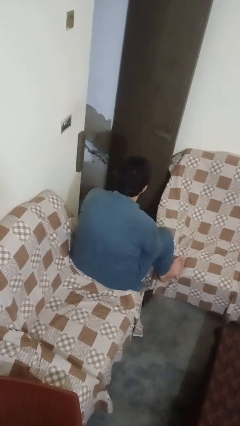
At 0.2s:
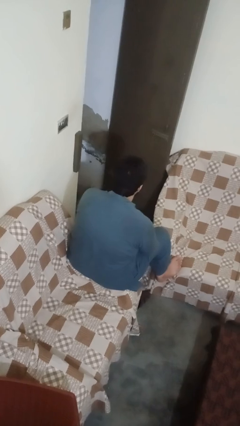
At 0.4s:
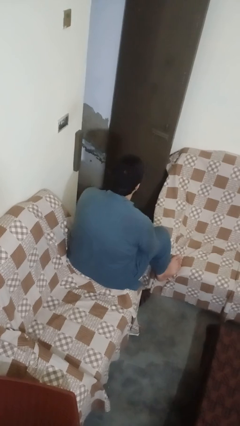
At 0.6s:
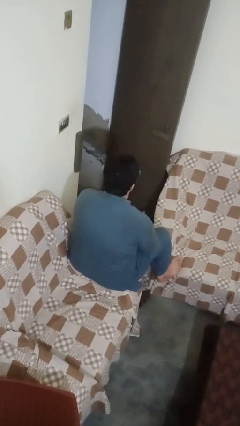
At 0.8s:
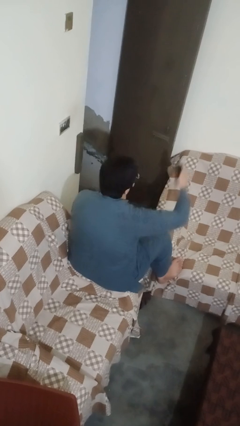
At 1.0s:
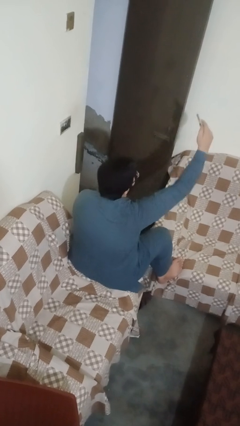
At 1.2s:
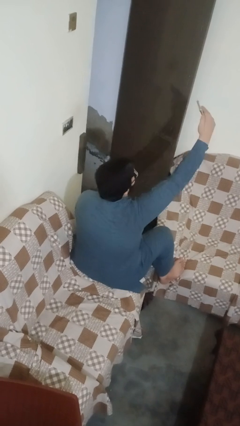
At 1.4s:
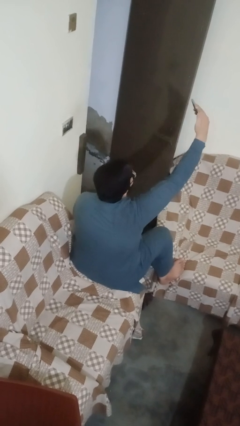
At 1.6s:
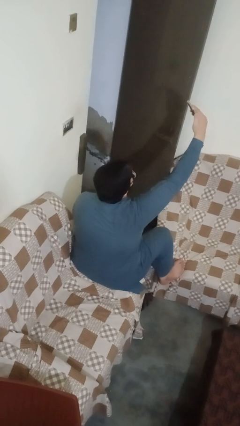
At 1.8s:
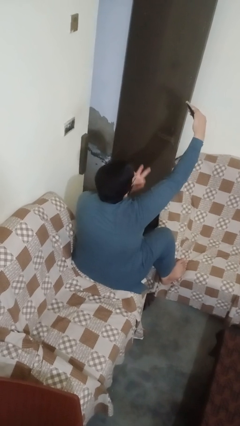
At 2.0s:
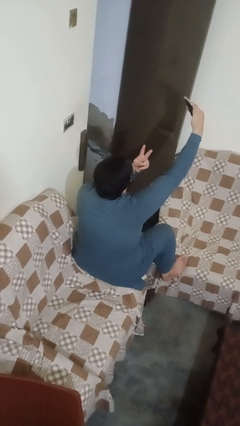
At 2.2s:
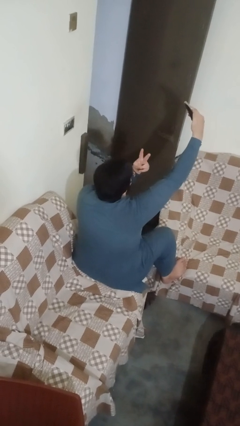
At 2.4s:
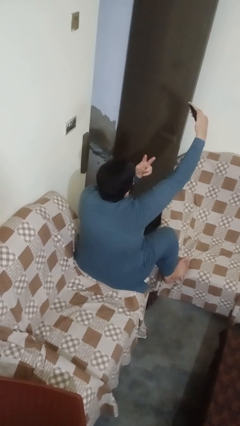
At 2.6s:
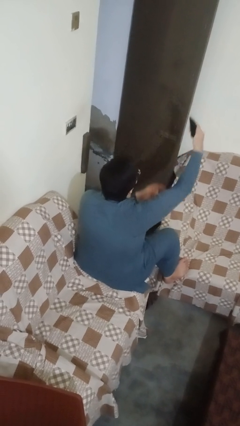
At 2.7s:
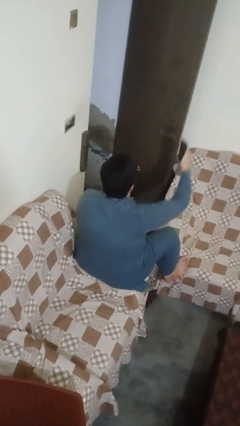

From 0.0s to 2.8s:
person takes selfie

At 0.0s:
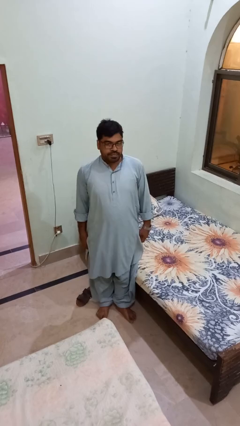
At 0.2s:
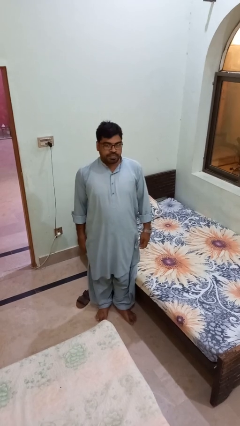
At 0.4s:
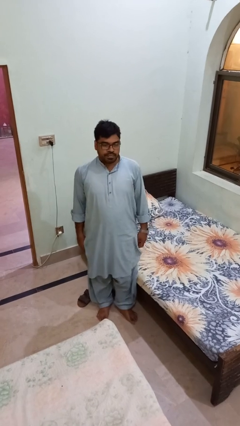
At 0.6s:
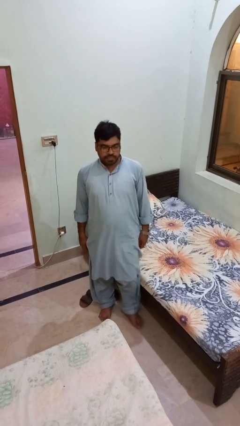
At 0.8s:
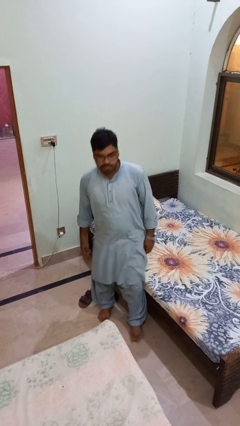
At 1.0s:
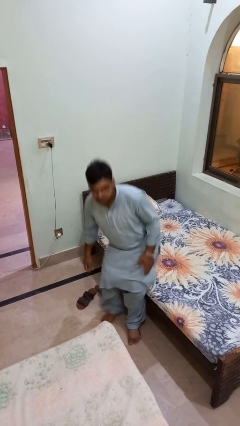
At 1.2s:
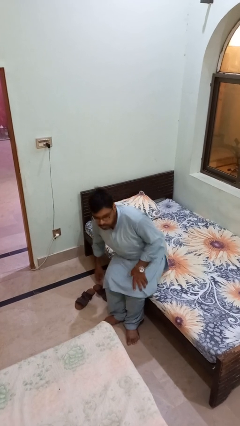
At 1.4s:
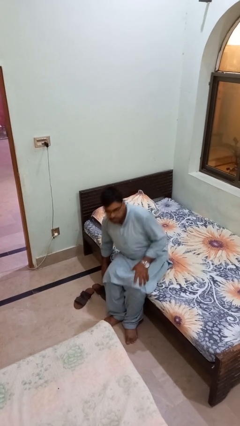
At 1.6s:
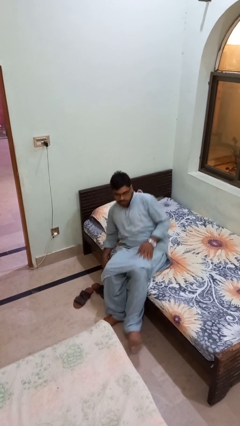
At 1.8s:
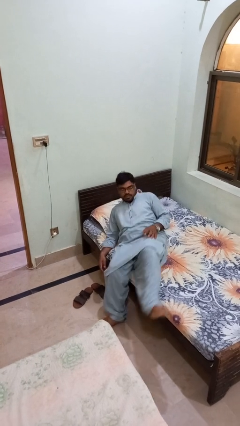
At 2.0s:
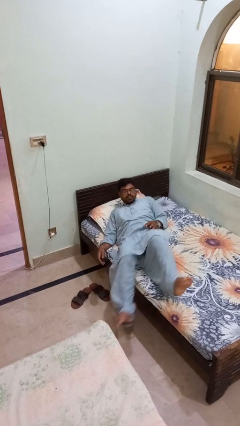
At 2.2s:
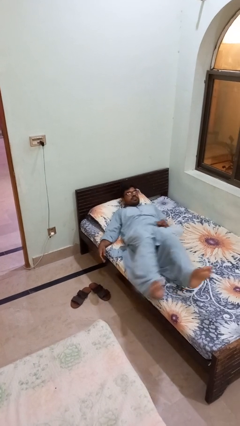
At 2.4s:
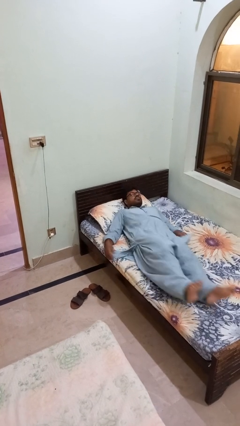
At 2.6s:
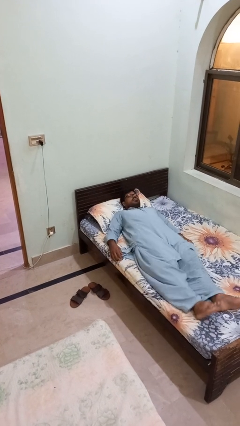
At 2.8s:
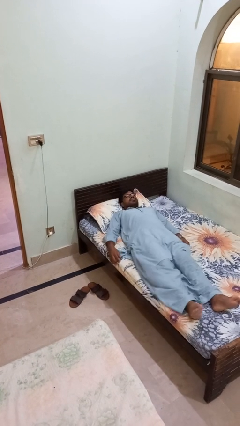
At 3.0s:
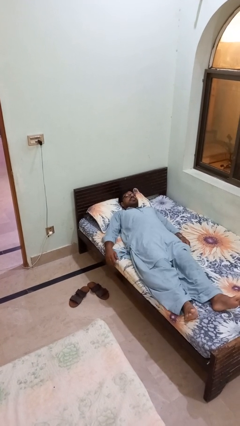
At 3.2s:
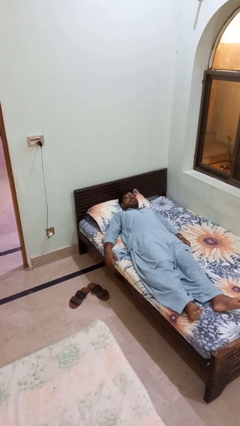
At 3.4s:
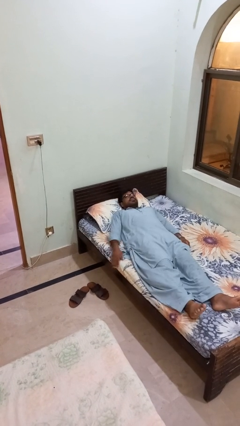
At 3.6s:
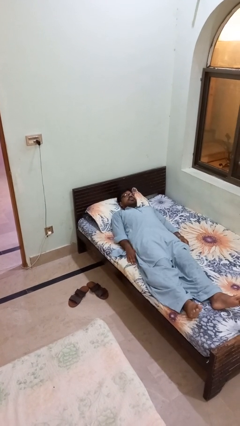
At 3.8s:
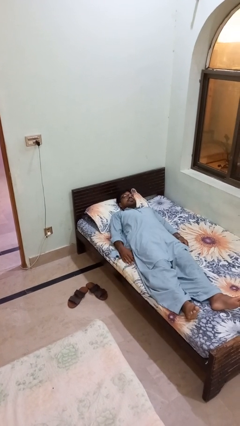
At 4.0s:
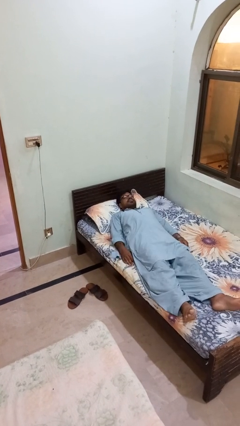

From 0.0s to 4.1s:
person lies down on bed

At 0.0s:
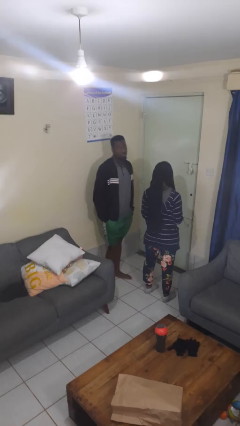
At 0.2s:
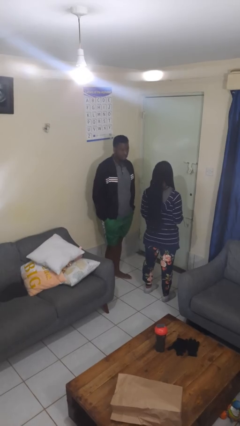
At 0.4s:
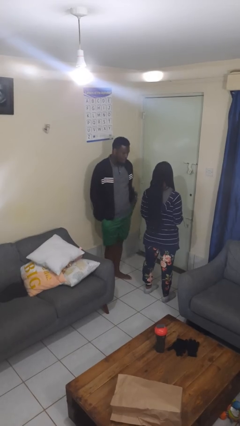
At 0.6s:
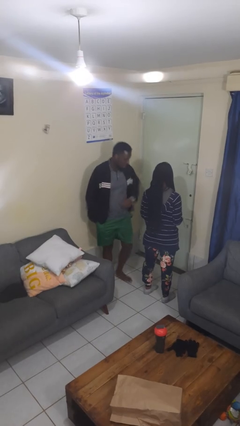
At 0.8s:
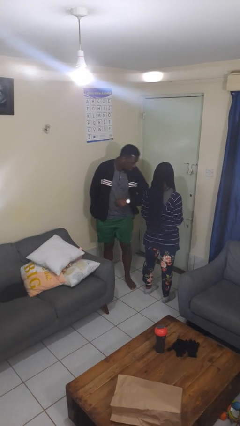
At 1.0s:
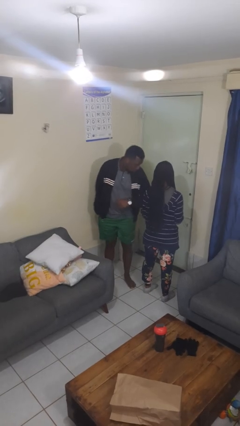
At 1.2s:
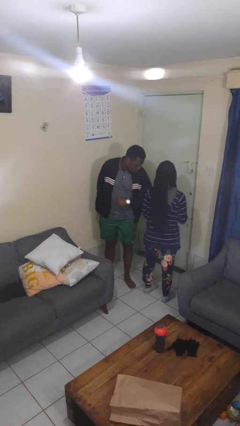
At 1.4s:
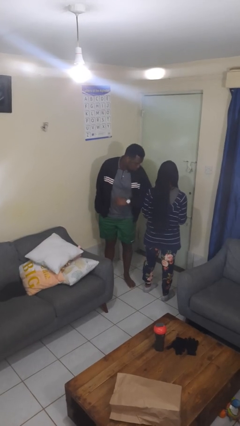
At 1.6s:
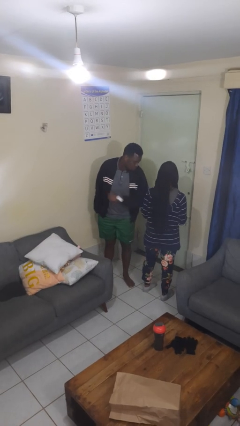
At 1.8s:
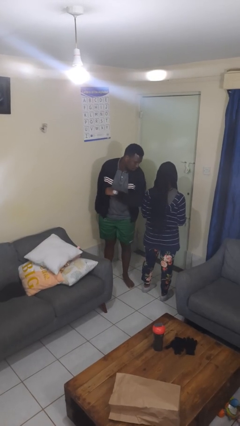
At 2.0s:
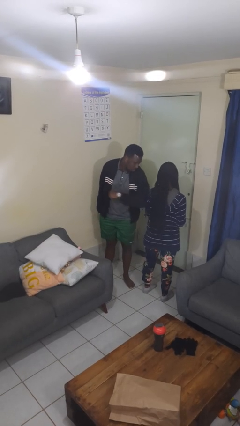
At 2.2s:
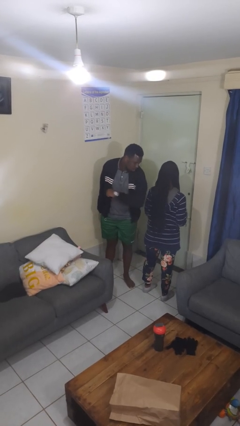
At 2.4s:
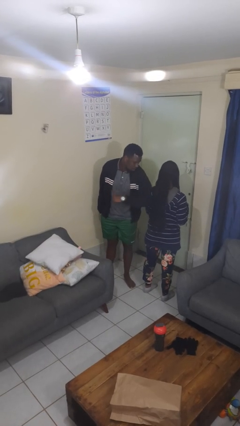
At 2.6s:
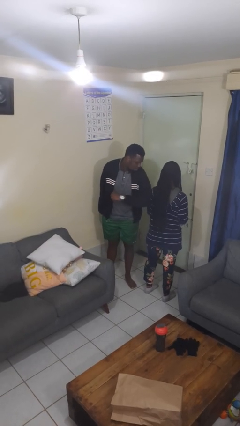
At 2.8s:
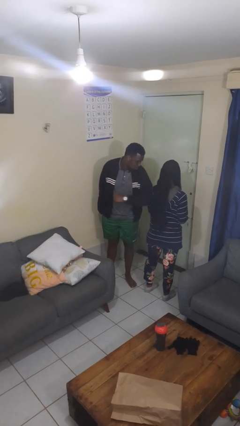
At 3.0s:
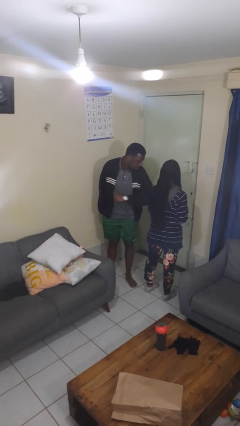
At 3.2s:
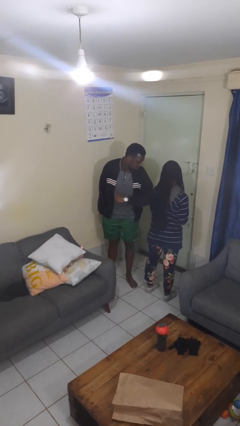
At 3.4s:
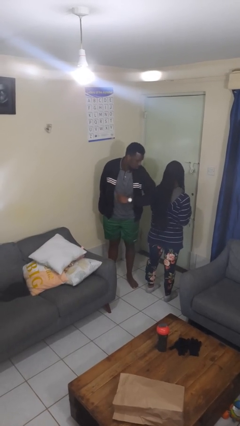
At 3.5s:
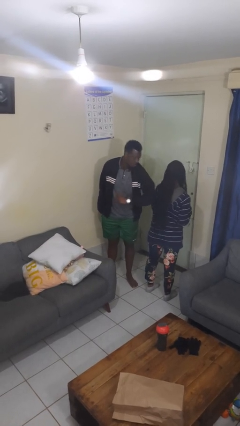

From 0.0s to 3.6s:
person nudges person with elbow

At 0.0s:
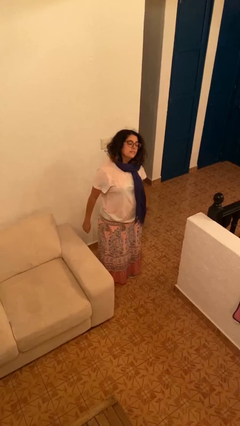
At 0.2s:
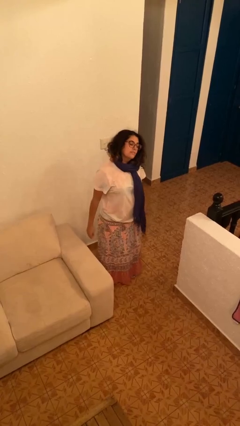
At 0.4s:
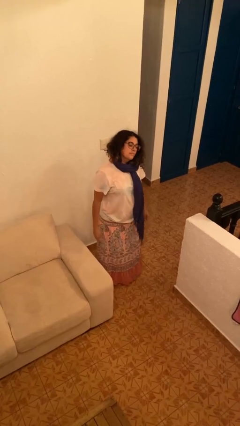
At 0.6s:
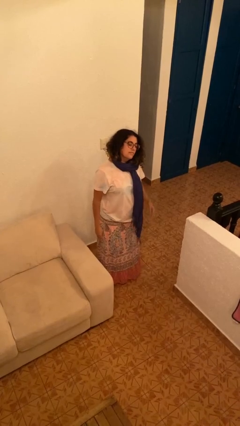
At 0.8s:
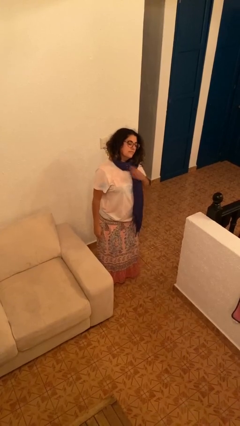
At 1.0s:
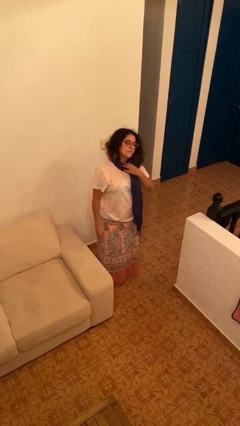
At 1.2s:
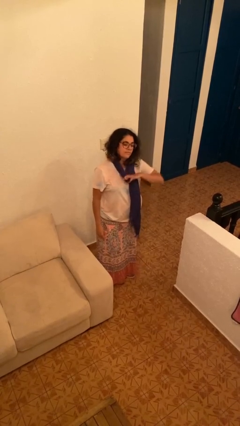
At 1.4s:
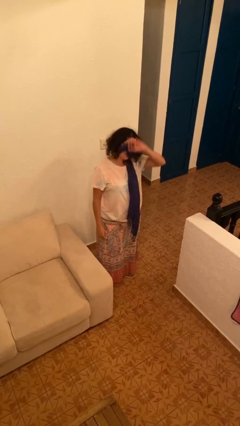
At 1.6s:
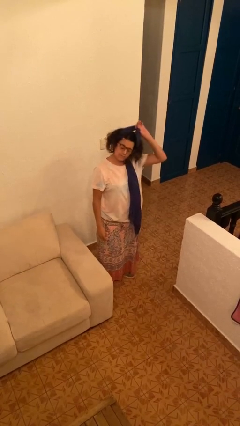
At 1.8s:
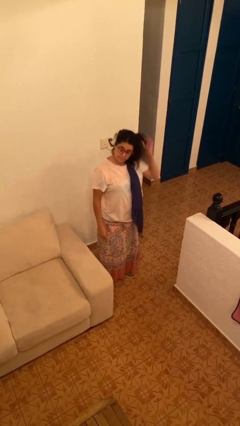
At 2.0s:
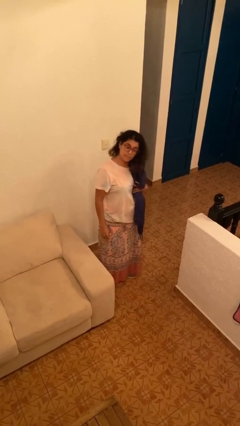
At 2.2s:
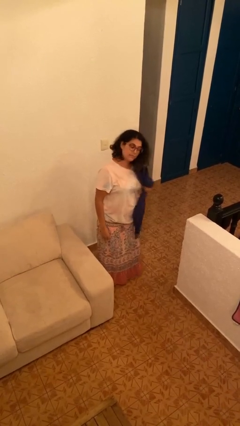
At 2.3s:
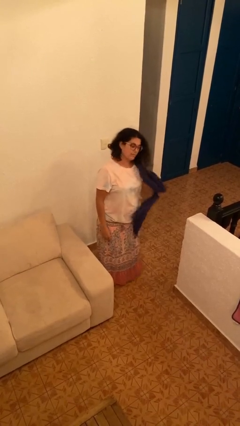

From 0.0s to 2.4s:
person takes off scarf

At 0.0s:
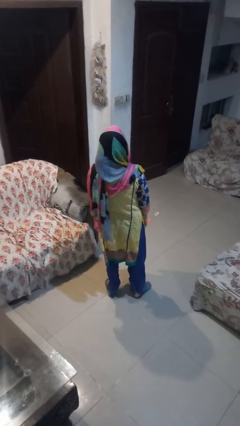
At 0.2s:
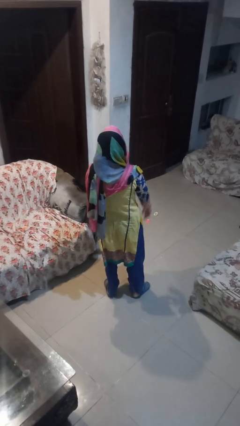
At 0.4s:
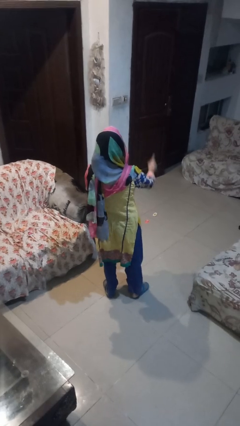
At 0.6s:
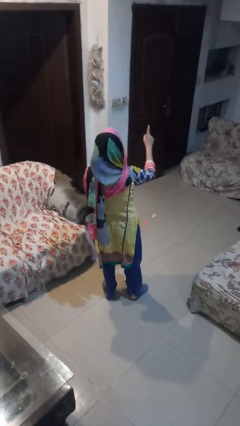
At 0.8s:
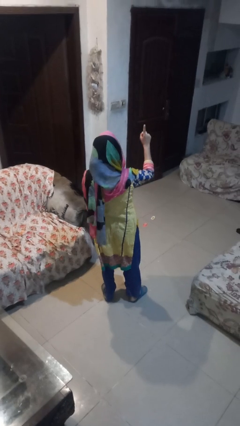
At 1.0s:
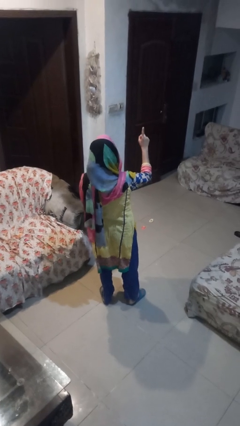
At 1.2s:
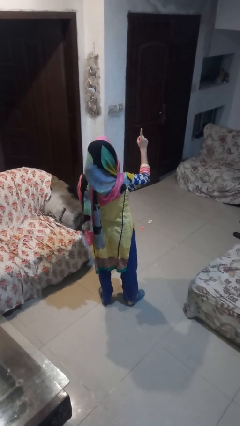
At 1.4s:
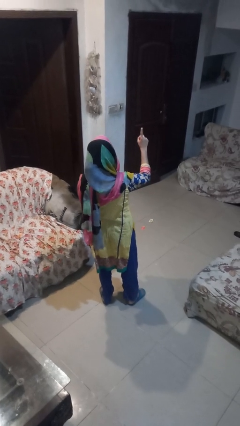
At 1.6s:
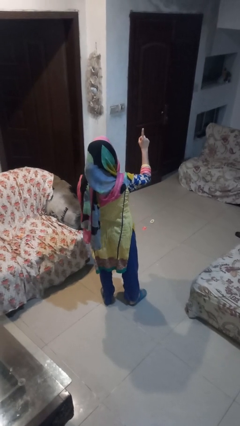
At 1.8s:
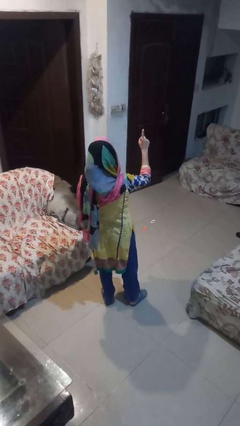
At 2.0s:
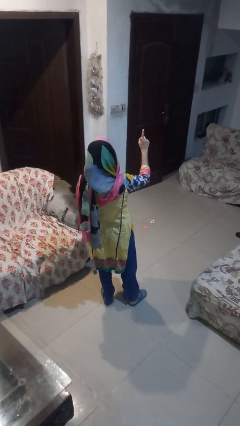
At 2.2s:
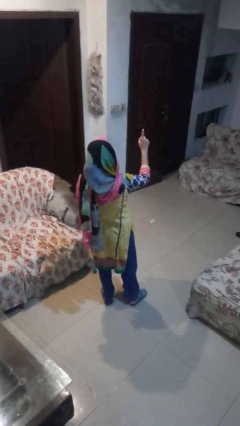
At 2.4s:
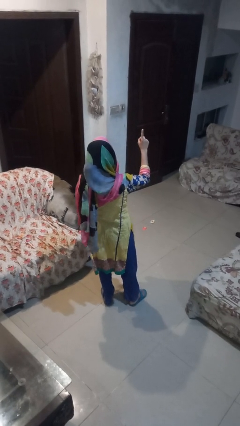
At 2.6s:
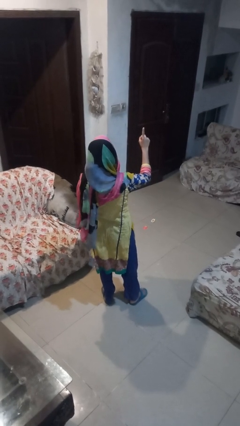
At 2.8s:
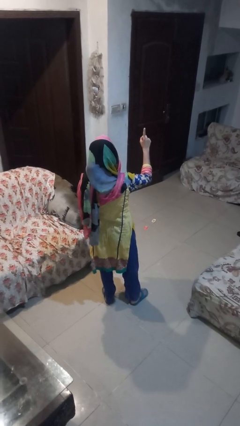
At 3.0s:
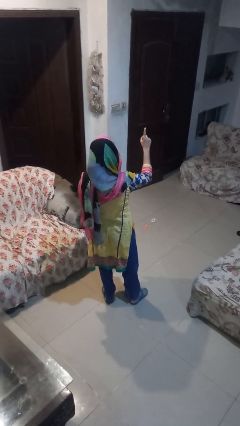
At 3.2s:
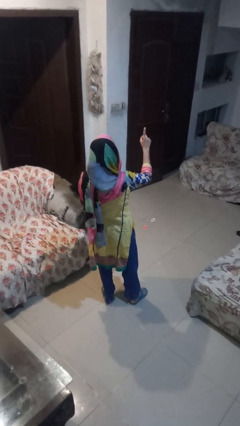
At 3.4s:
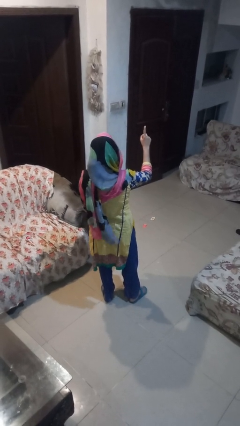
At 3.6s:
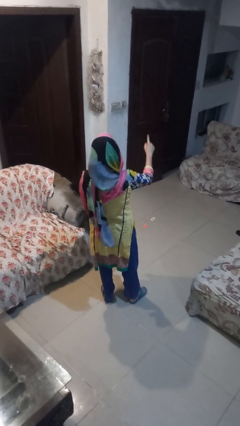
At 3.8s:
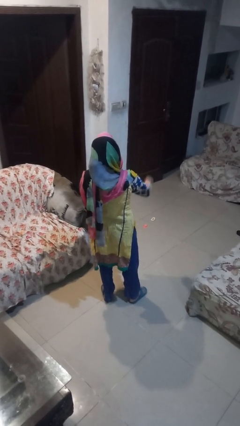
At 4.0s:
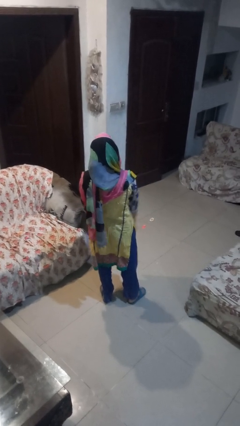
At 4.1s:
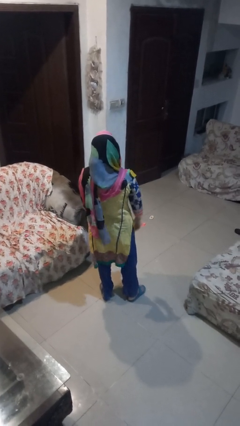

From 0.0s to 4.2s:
person gestures number one

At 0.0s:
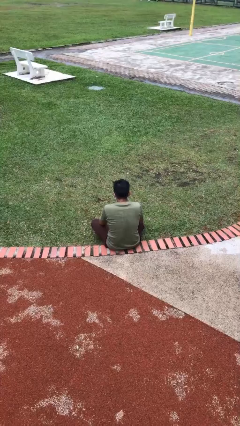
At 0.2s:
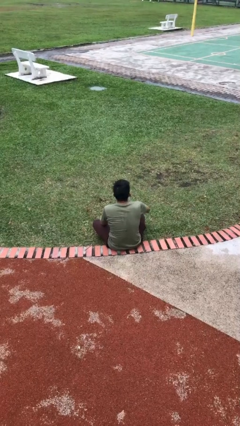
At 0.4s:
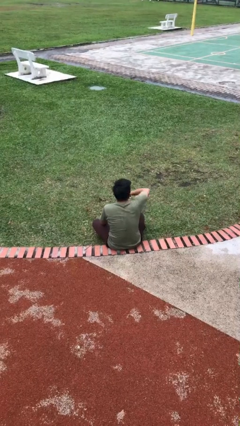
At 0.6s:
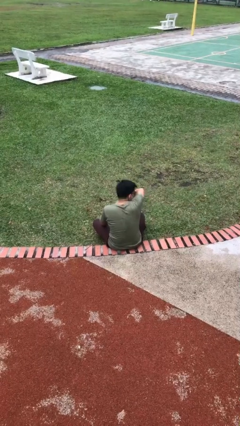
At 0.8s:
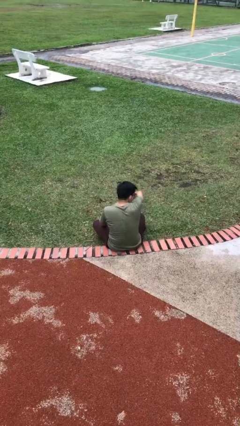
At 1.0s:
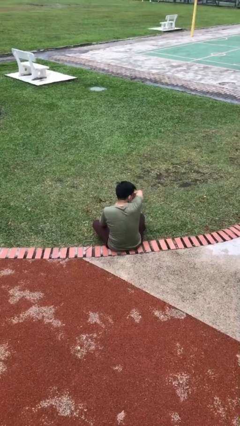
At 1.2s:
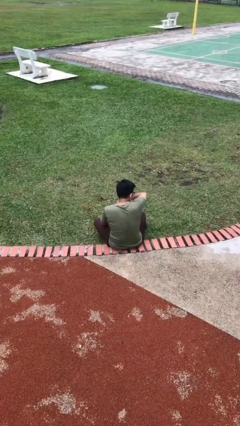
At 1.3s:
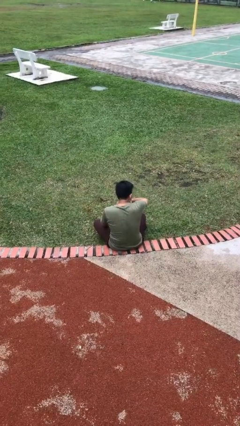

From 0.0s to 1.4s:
person sneezes into arm
